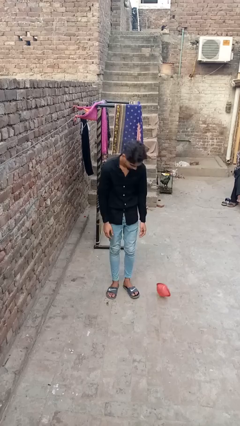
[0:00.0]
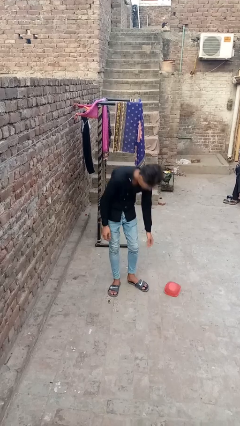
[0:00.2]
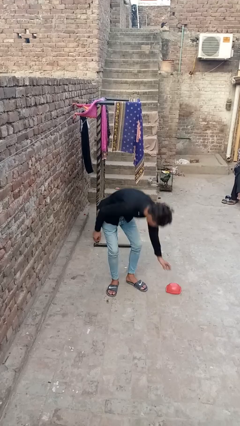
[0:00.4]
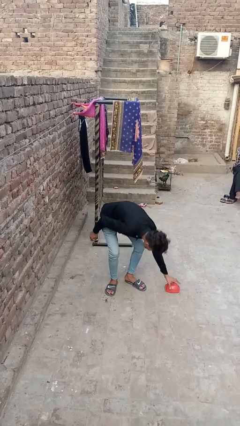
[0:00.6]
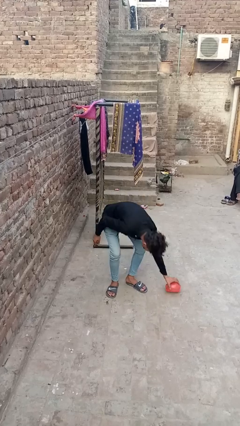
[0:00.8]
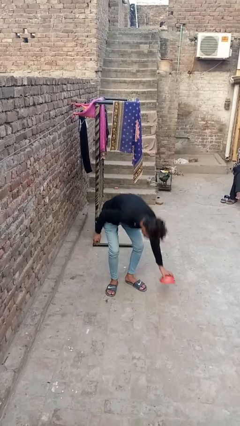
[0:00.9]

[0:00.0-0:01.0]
person picks up object from floor

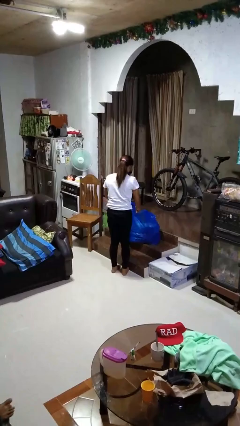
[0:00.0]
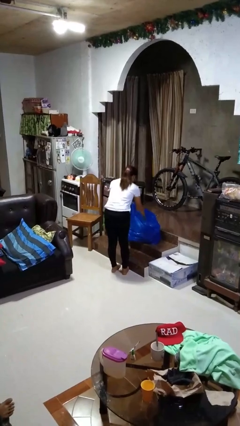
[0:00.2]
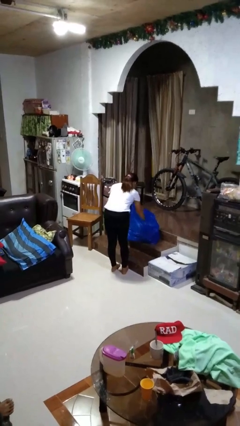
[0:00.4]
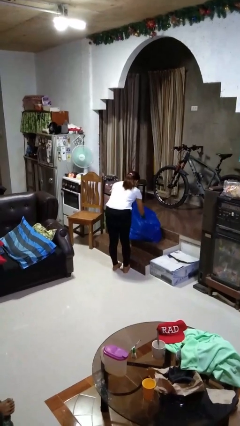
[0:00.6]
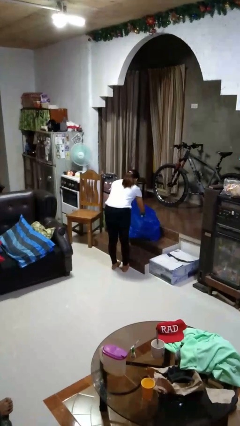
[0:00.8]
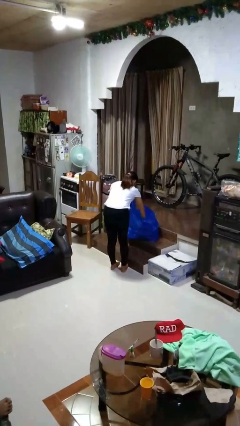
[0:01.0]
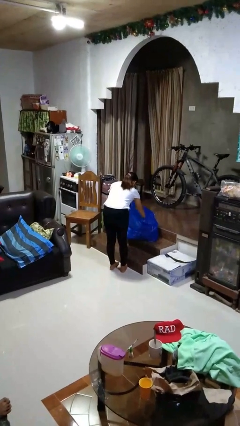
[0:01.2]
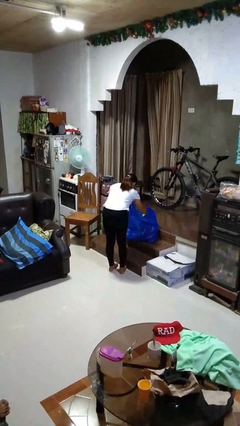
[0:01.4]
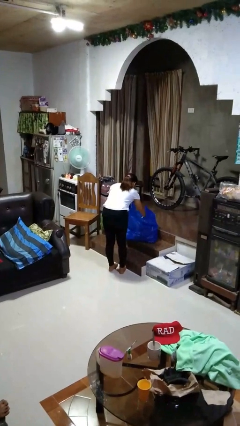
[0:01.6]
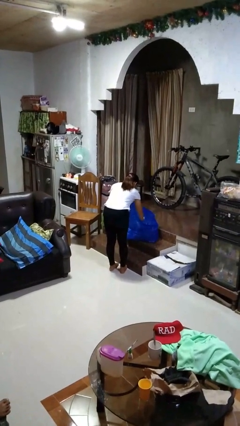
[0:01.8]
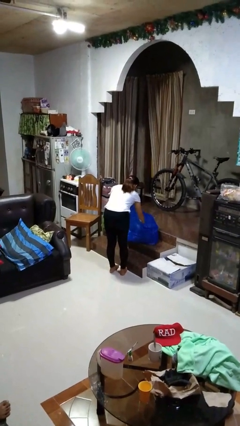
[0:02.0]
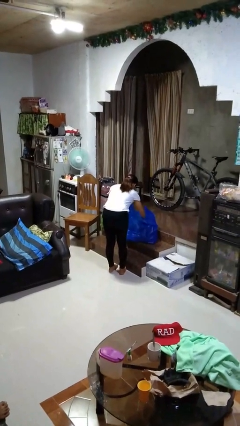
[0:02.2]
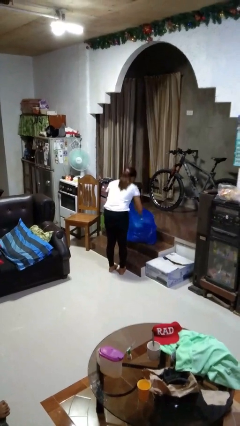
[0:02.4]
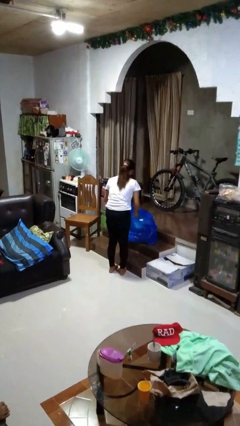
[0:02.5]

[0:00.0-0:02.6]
person searches in bag

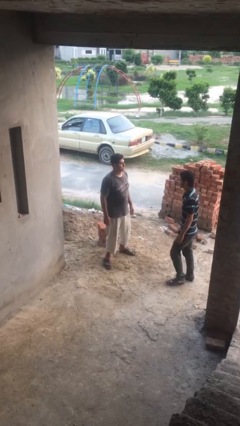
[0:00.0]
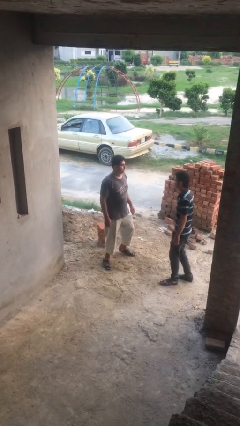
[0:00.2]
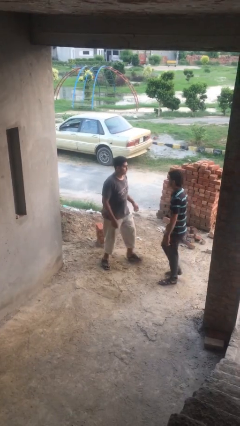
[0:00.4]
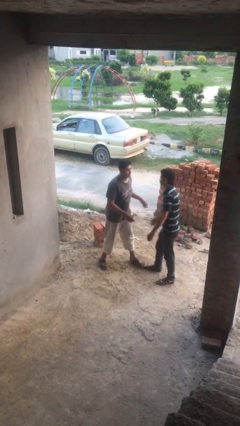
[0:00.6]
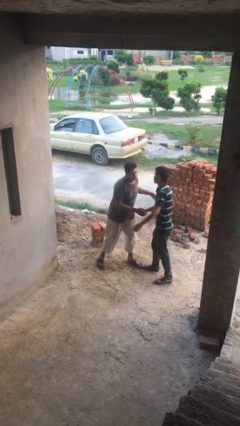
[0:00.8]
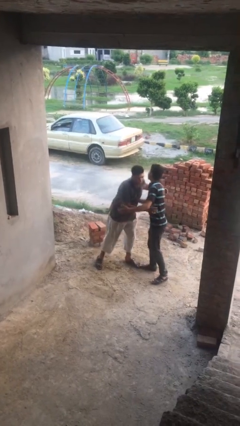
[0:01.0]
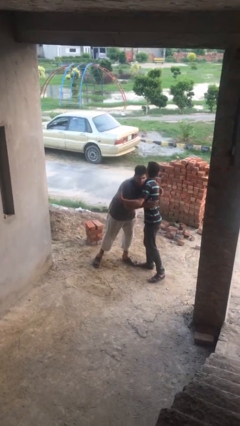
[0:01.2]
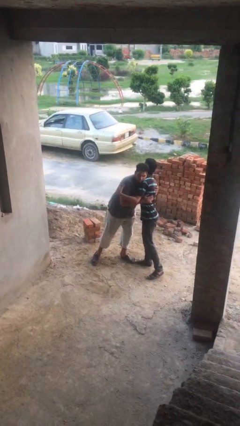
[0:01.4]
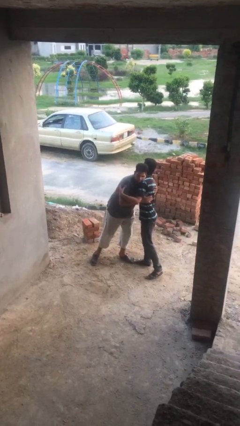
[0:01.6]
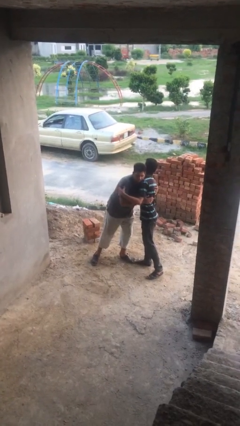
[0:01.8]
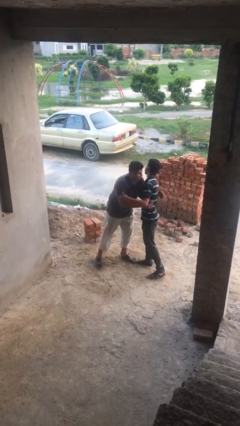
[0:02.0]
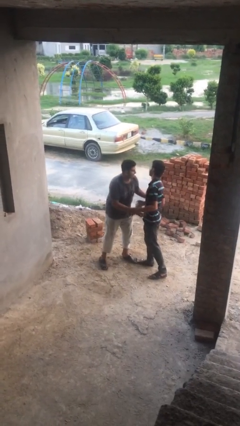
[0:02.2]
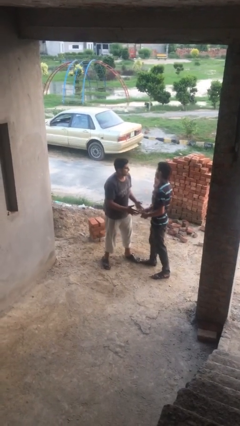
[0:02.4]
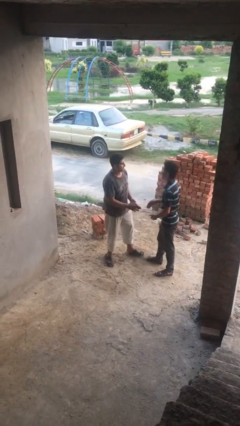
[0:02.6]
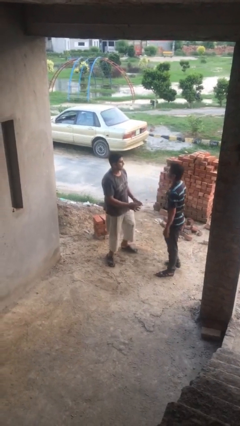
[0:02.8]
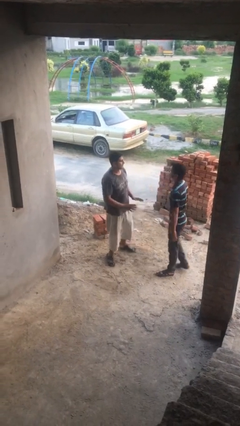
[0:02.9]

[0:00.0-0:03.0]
person embraces person

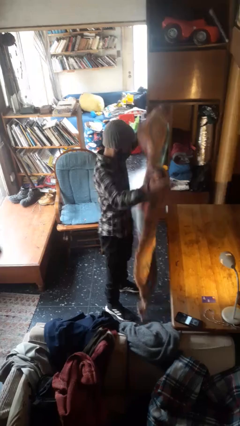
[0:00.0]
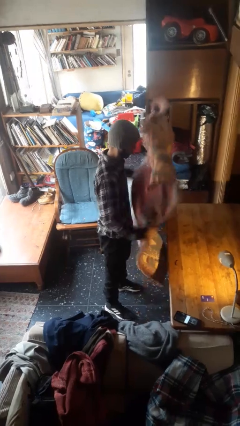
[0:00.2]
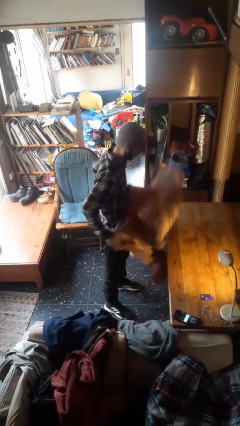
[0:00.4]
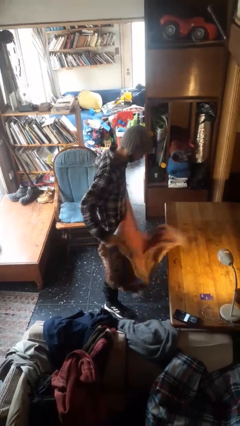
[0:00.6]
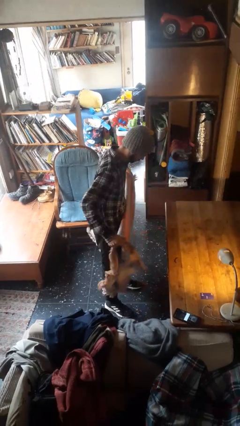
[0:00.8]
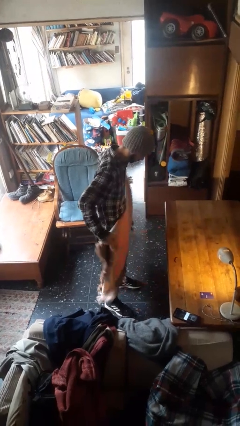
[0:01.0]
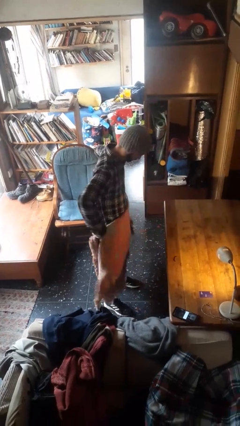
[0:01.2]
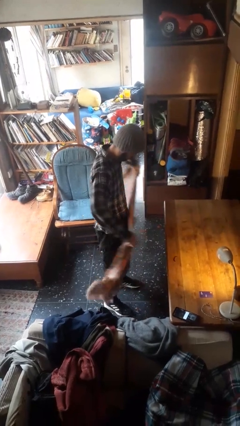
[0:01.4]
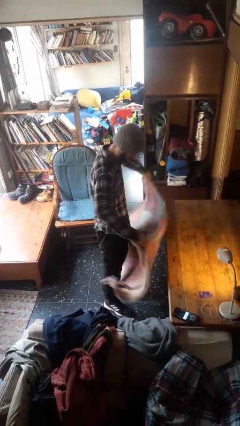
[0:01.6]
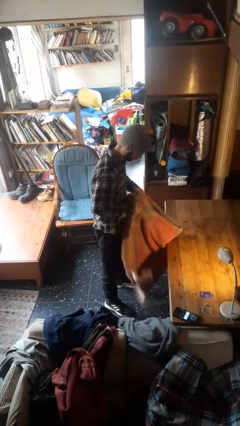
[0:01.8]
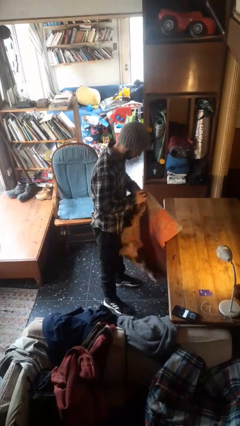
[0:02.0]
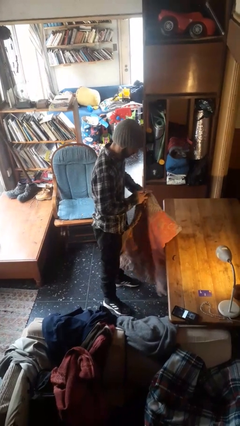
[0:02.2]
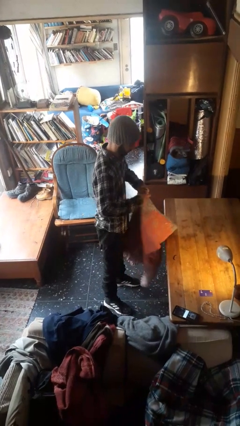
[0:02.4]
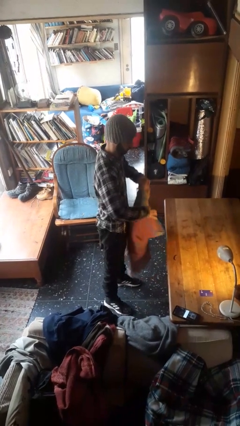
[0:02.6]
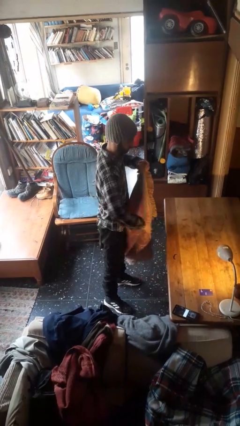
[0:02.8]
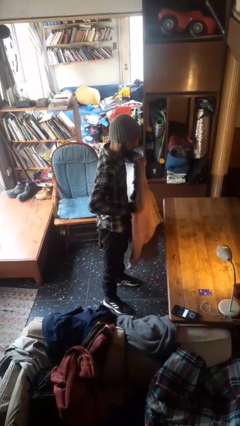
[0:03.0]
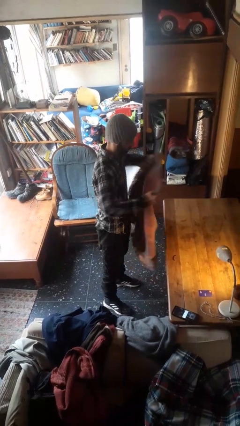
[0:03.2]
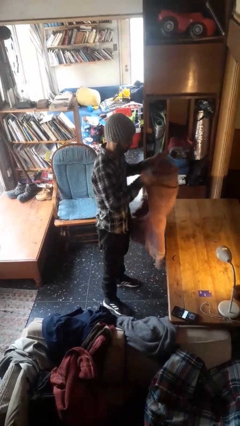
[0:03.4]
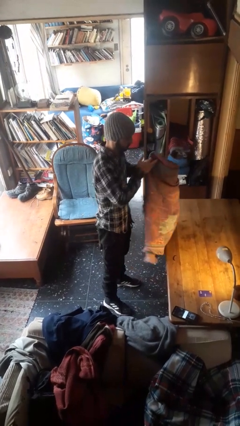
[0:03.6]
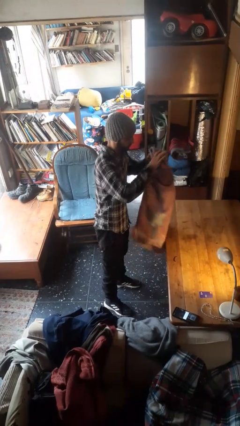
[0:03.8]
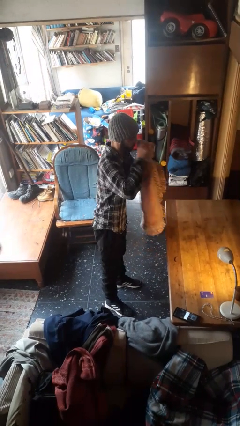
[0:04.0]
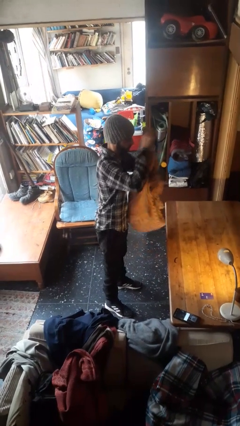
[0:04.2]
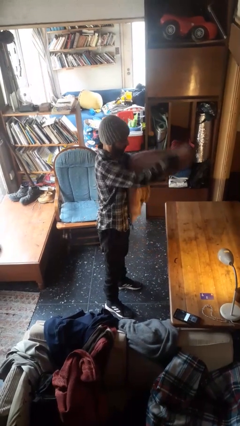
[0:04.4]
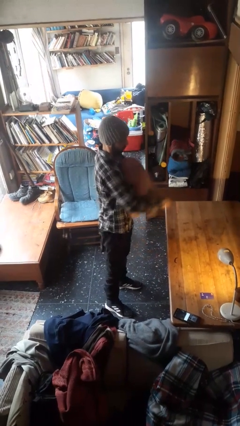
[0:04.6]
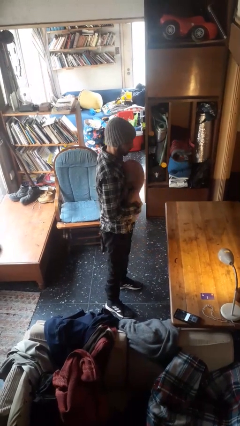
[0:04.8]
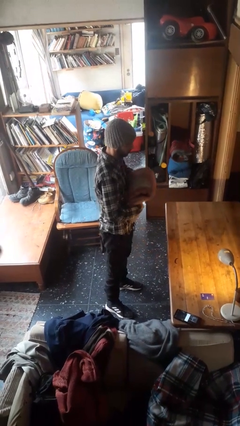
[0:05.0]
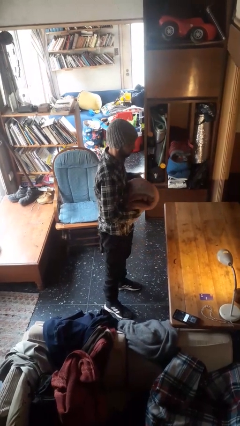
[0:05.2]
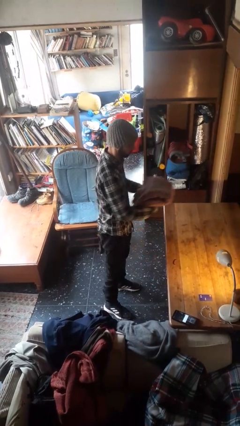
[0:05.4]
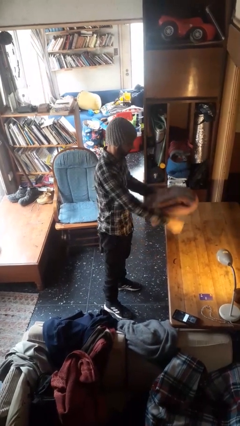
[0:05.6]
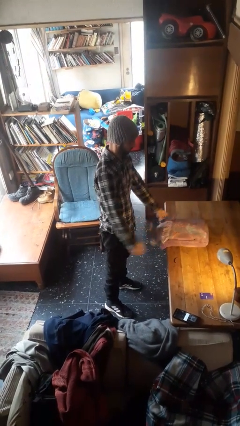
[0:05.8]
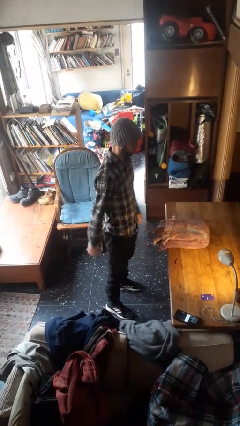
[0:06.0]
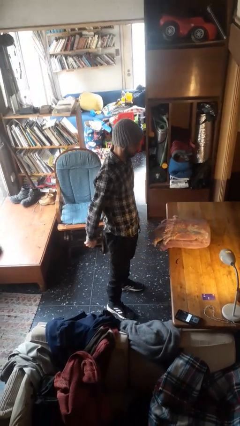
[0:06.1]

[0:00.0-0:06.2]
person folds blanket

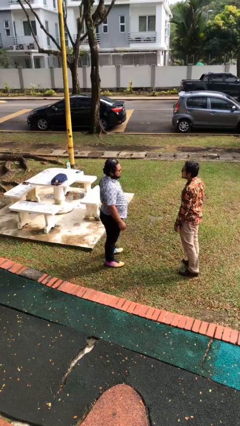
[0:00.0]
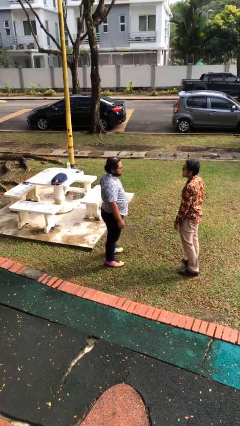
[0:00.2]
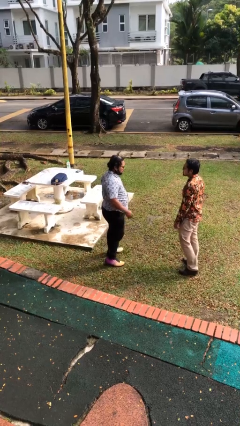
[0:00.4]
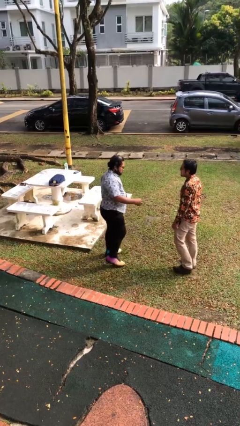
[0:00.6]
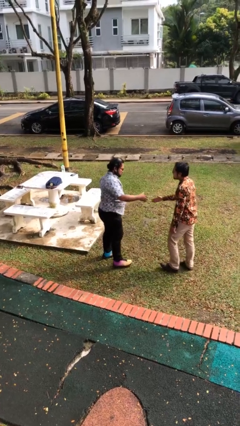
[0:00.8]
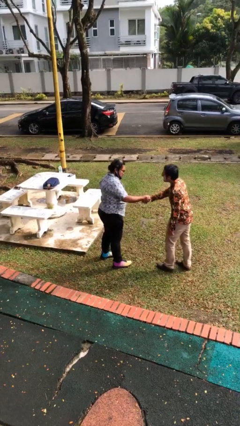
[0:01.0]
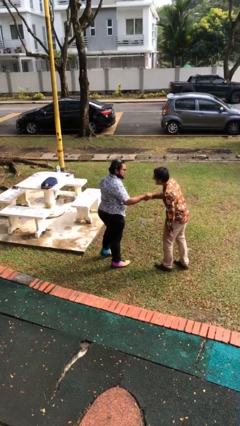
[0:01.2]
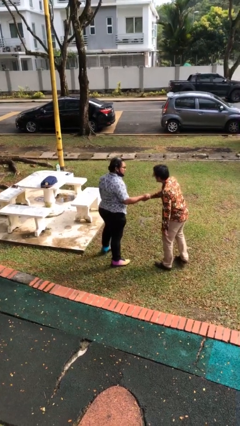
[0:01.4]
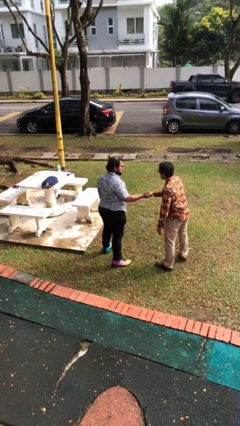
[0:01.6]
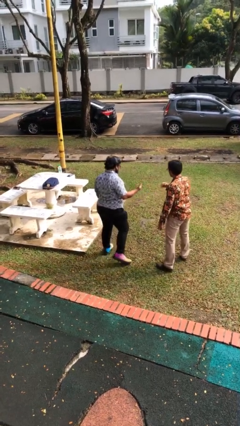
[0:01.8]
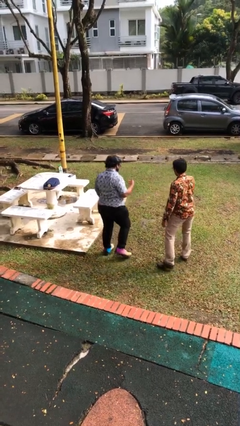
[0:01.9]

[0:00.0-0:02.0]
person shakes hand

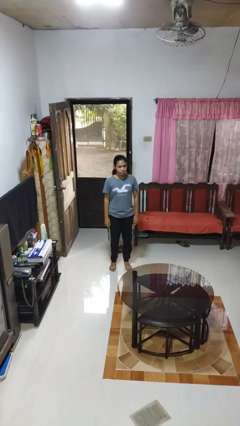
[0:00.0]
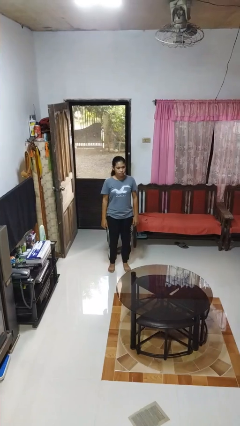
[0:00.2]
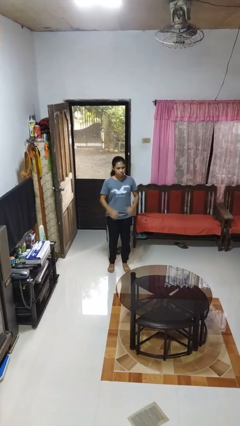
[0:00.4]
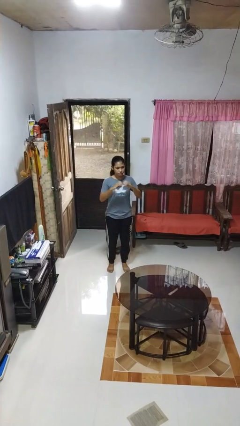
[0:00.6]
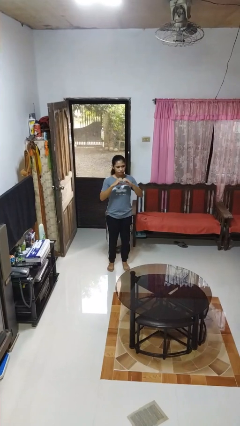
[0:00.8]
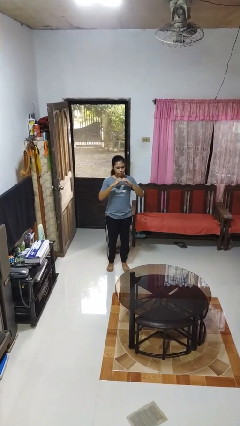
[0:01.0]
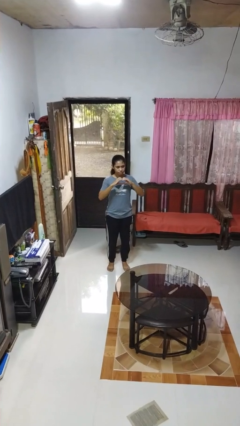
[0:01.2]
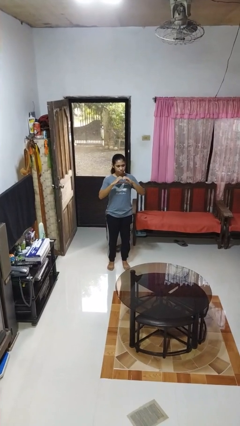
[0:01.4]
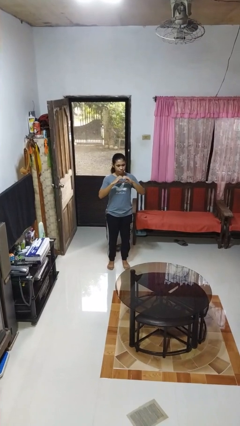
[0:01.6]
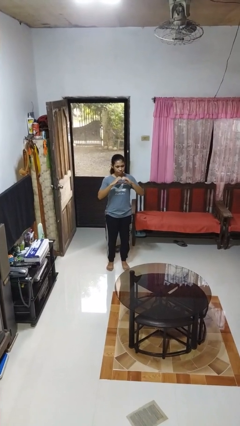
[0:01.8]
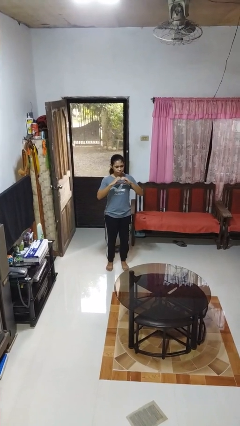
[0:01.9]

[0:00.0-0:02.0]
person gestures heart

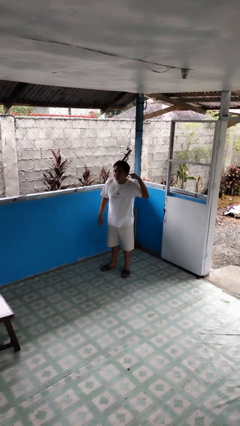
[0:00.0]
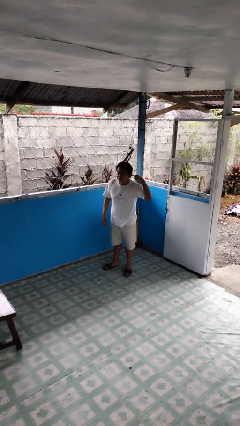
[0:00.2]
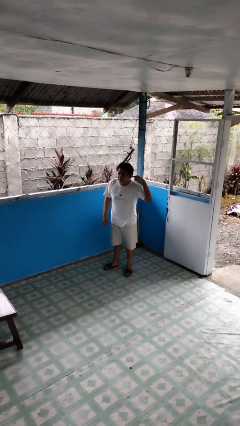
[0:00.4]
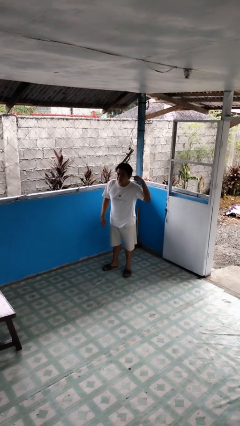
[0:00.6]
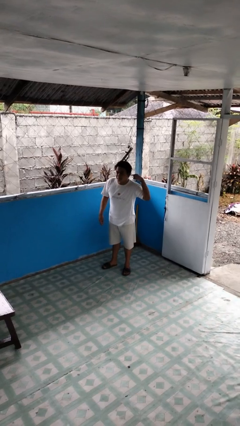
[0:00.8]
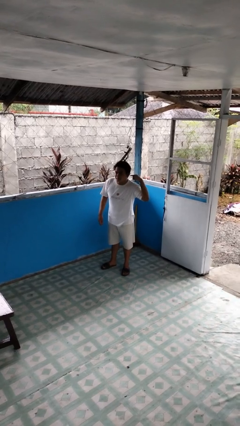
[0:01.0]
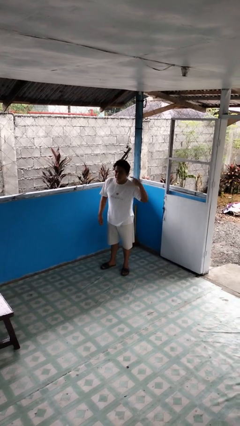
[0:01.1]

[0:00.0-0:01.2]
person gestures listen closely
